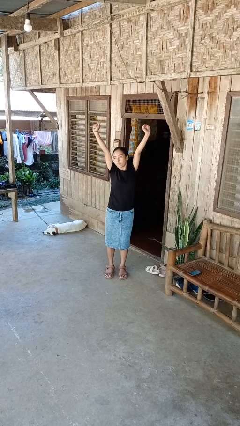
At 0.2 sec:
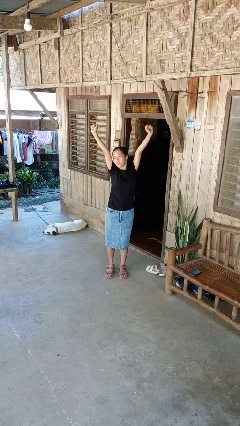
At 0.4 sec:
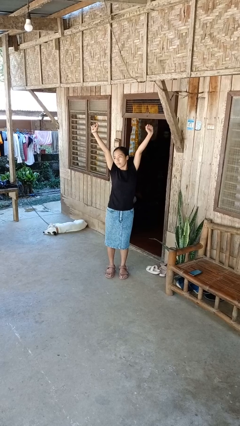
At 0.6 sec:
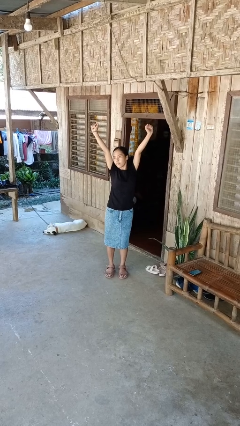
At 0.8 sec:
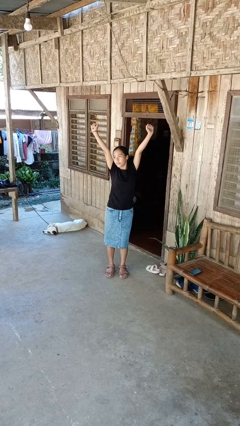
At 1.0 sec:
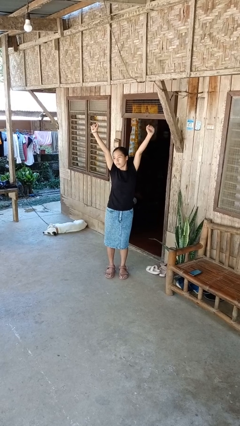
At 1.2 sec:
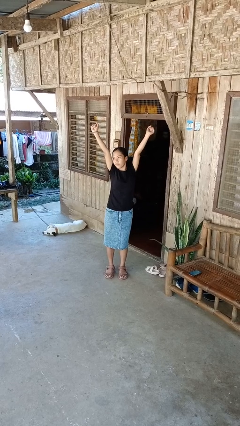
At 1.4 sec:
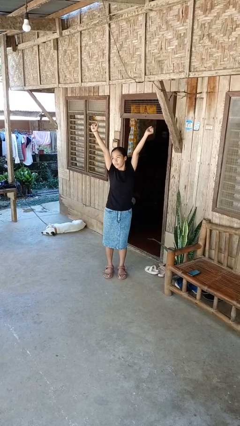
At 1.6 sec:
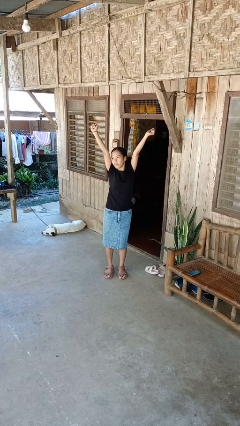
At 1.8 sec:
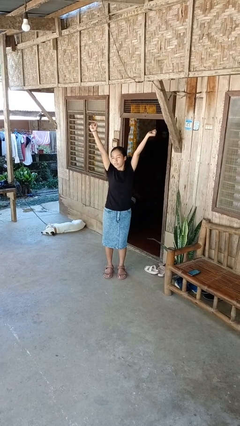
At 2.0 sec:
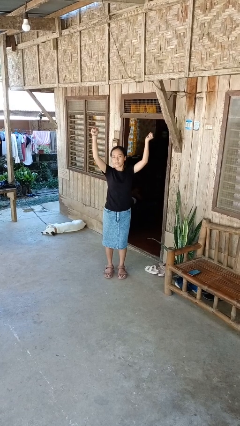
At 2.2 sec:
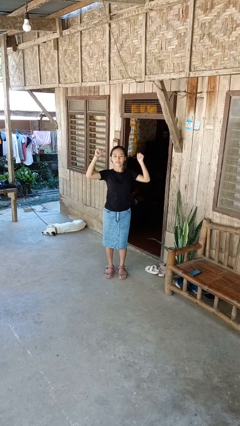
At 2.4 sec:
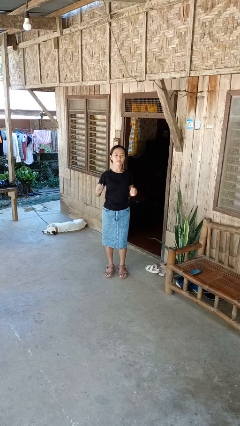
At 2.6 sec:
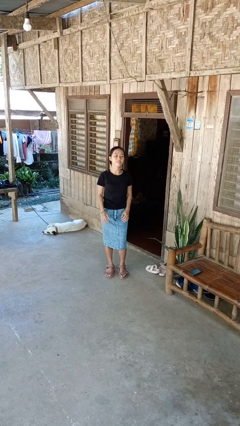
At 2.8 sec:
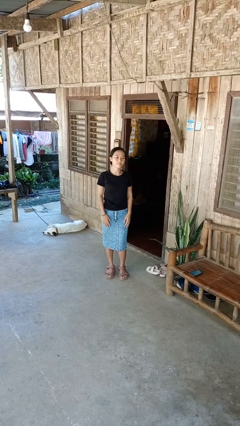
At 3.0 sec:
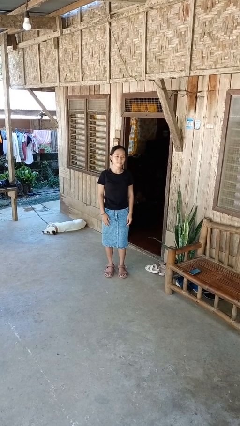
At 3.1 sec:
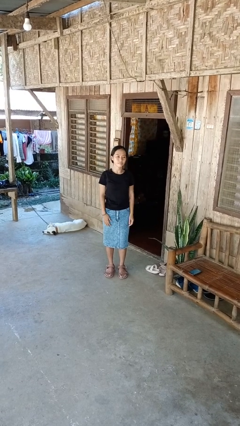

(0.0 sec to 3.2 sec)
person stretches arms over head

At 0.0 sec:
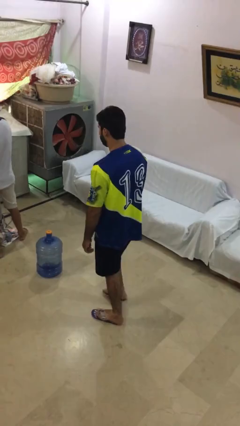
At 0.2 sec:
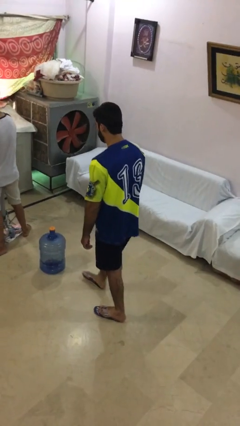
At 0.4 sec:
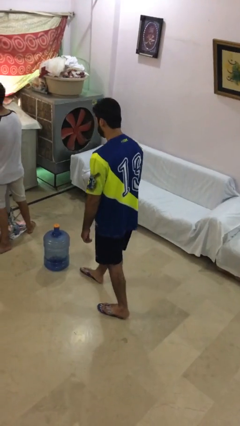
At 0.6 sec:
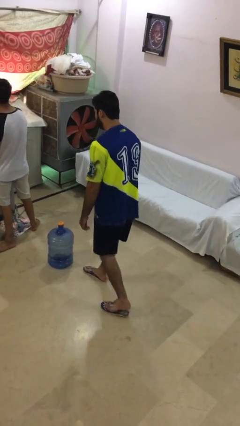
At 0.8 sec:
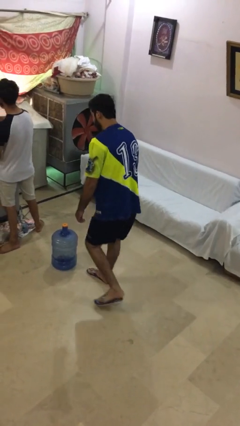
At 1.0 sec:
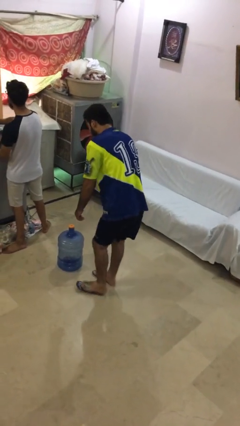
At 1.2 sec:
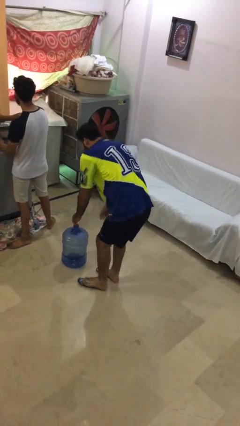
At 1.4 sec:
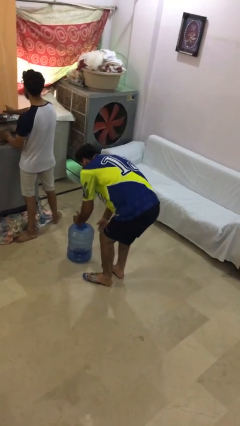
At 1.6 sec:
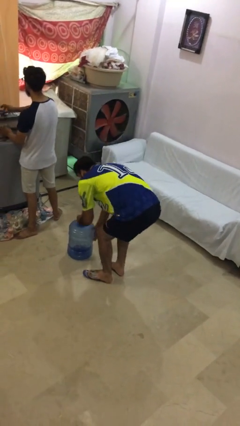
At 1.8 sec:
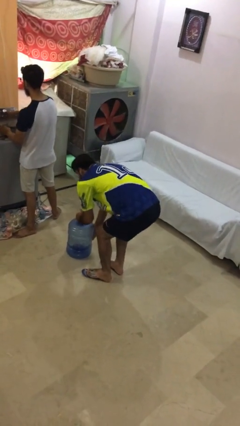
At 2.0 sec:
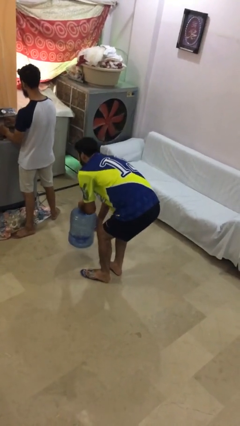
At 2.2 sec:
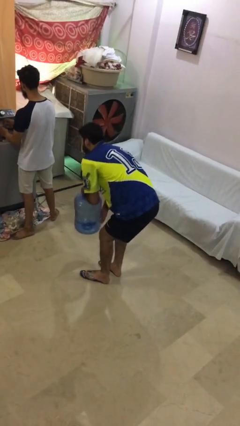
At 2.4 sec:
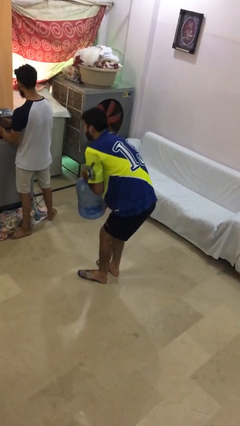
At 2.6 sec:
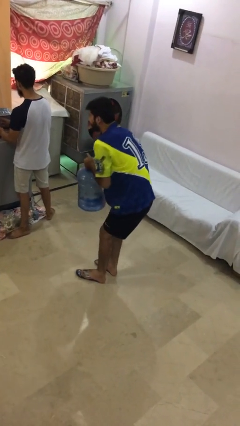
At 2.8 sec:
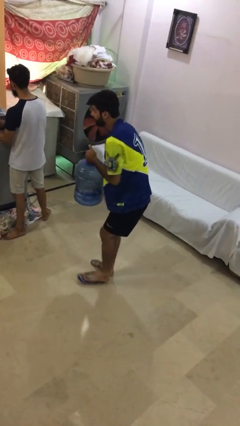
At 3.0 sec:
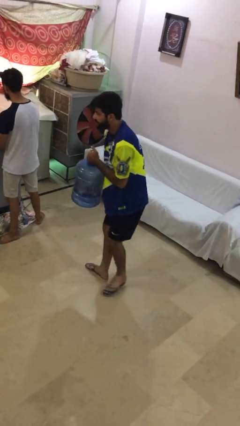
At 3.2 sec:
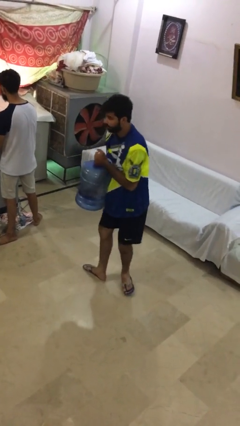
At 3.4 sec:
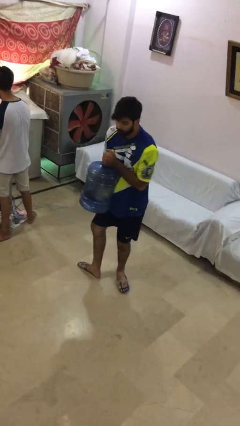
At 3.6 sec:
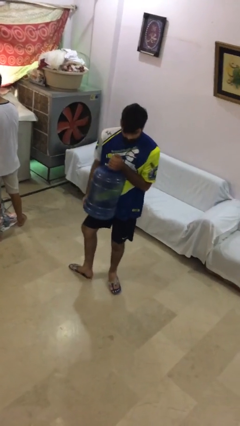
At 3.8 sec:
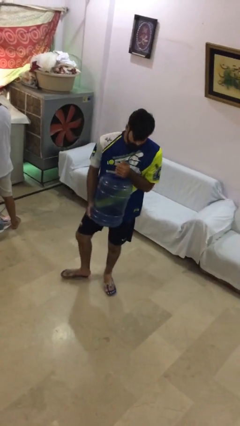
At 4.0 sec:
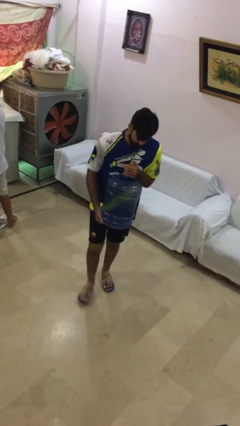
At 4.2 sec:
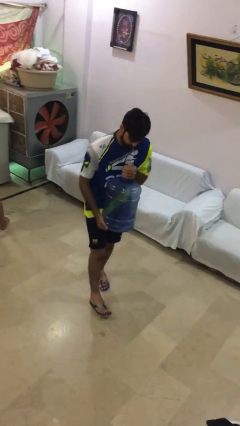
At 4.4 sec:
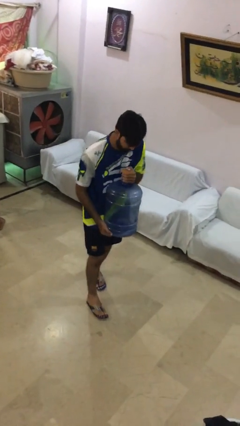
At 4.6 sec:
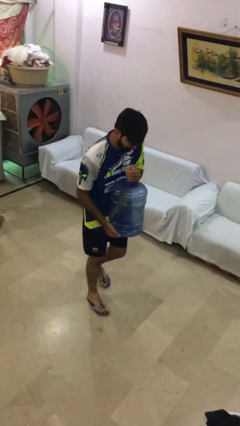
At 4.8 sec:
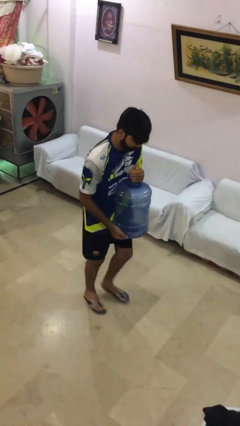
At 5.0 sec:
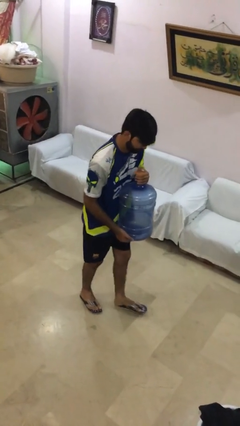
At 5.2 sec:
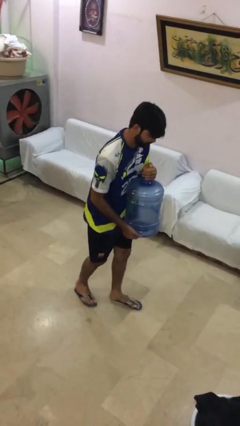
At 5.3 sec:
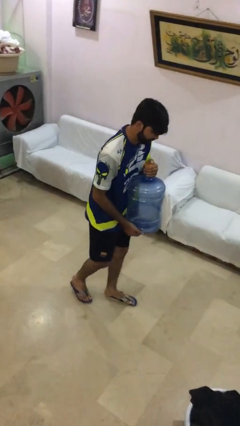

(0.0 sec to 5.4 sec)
person steals object from person

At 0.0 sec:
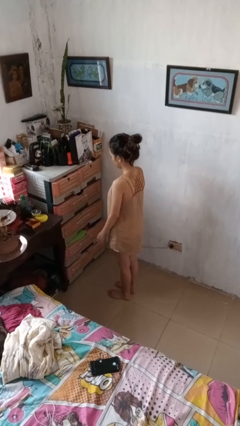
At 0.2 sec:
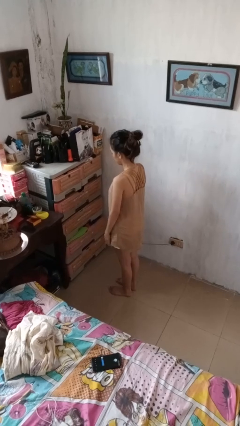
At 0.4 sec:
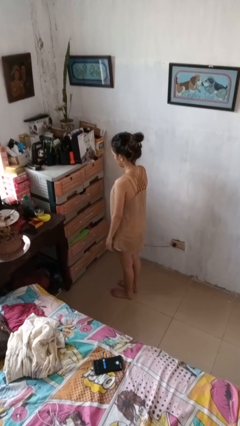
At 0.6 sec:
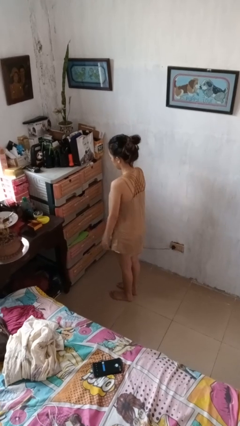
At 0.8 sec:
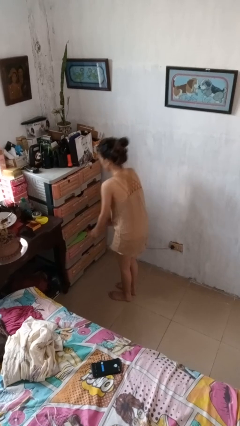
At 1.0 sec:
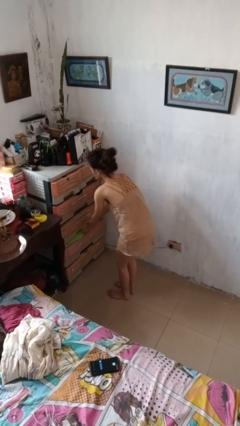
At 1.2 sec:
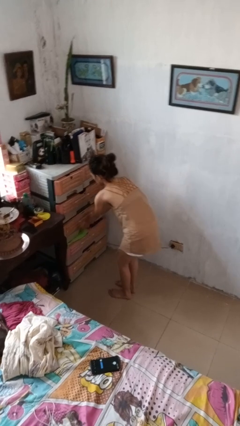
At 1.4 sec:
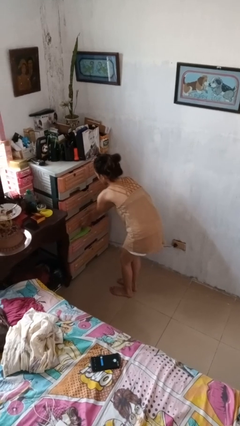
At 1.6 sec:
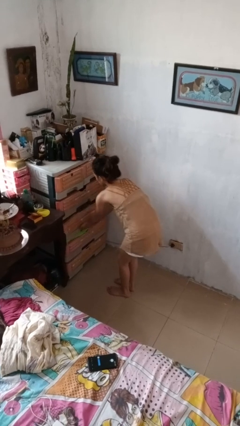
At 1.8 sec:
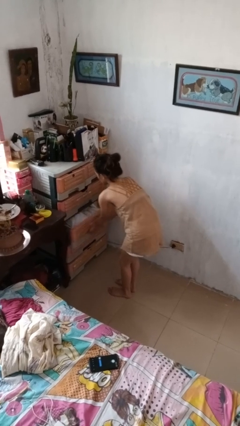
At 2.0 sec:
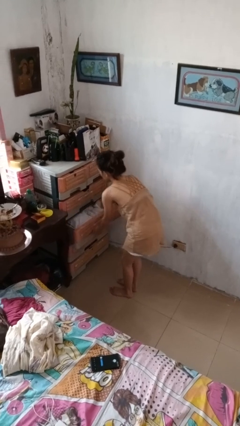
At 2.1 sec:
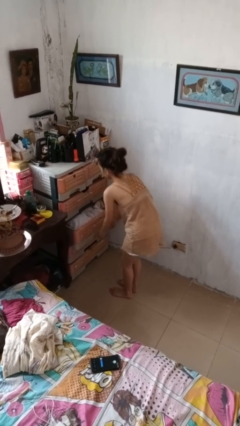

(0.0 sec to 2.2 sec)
person opens dresser drawer

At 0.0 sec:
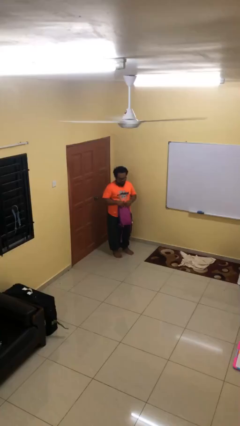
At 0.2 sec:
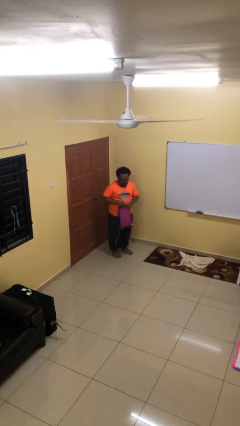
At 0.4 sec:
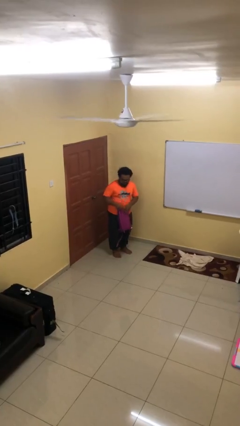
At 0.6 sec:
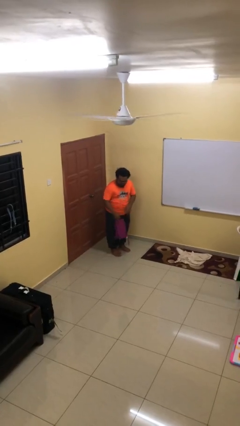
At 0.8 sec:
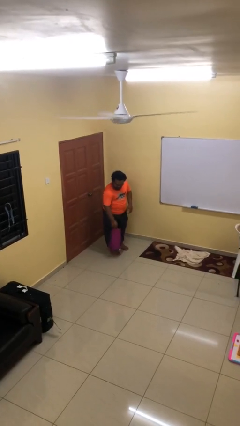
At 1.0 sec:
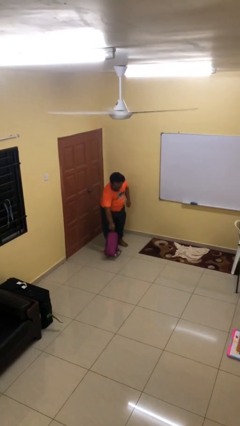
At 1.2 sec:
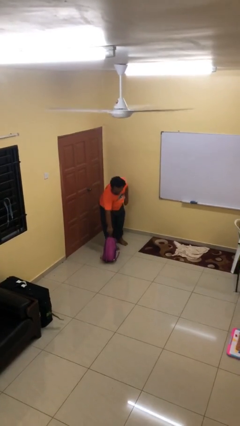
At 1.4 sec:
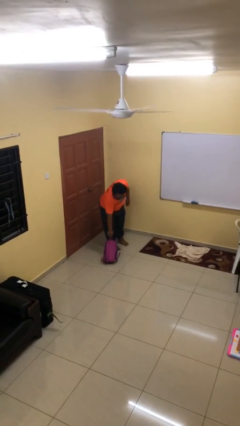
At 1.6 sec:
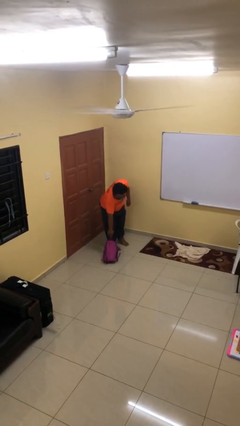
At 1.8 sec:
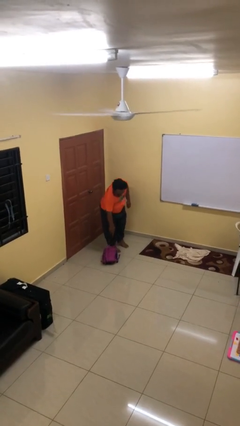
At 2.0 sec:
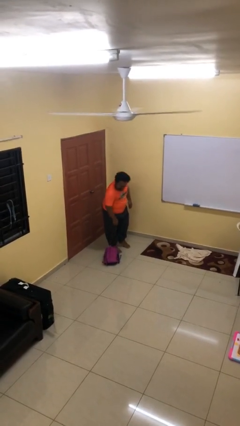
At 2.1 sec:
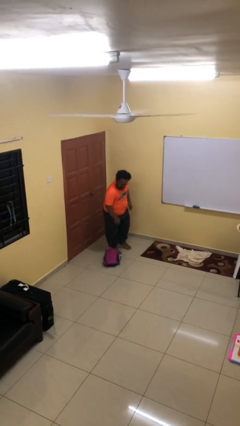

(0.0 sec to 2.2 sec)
person puts down object on floor

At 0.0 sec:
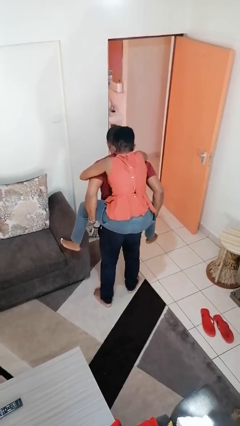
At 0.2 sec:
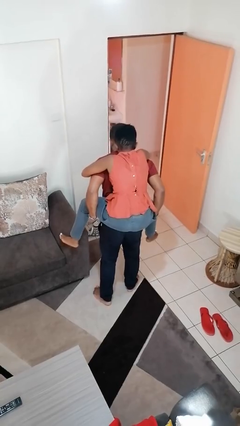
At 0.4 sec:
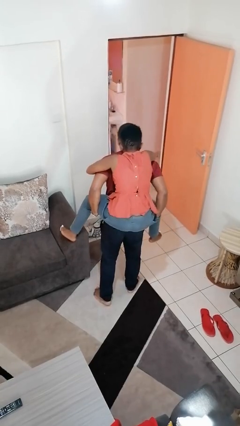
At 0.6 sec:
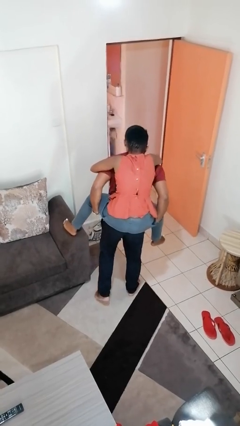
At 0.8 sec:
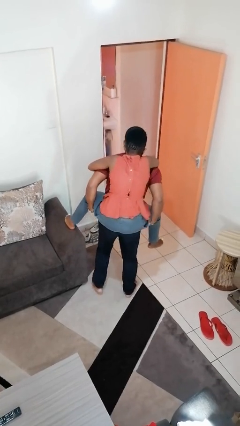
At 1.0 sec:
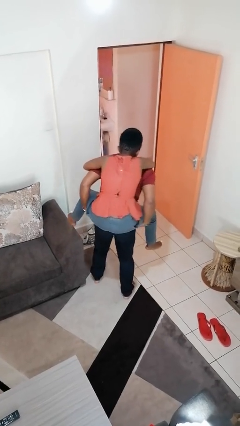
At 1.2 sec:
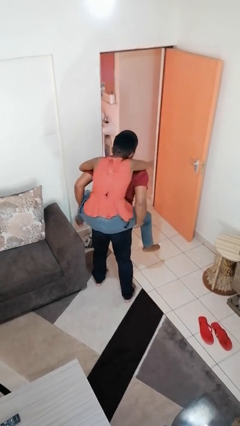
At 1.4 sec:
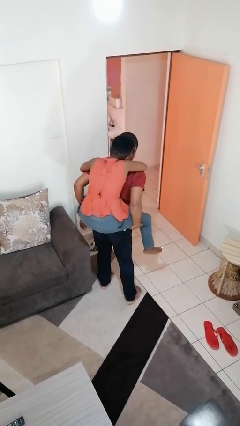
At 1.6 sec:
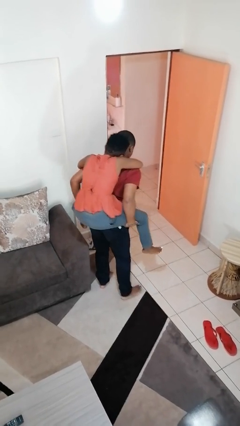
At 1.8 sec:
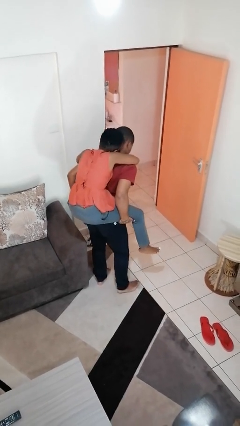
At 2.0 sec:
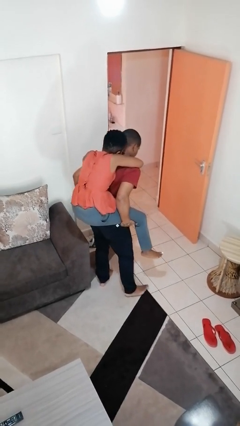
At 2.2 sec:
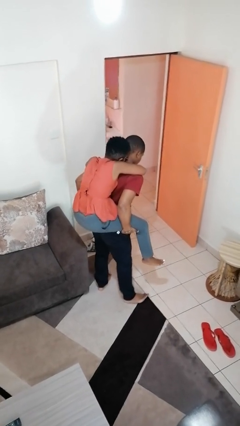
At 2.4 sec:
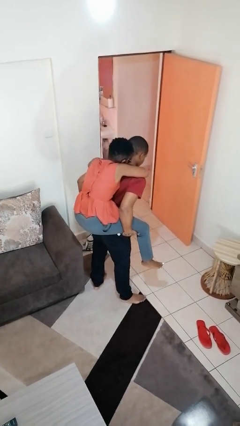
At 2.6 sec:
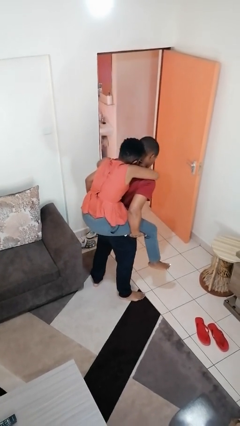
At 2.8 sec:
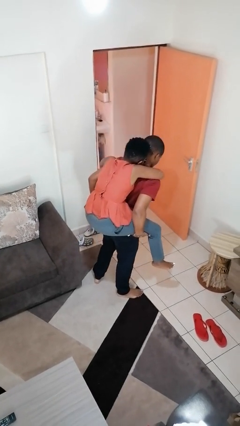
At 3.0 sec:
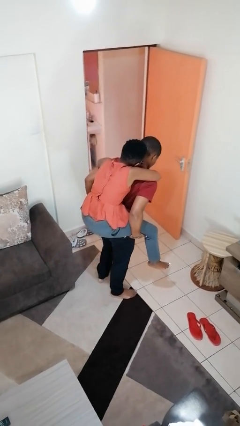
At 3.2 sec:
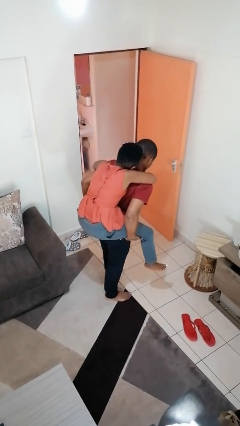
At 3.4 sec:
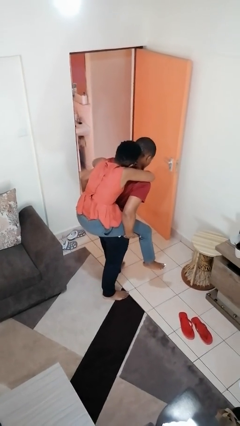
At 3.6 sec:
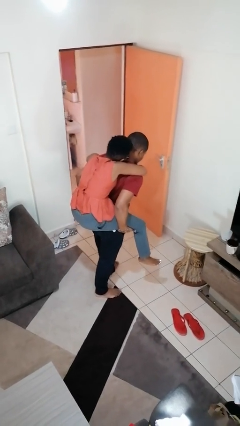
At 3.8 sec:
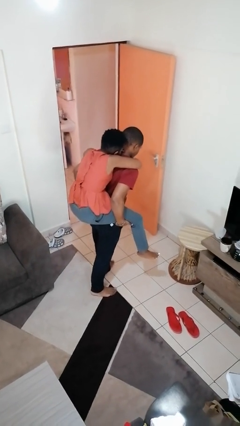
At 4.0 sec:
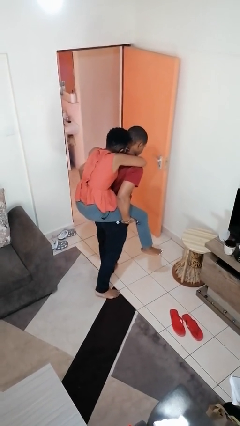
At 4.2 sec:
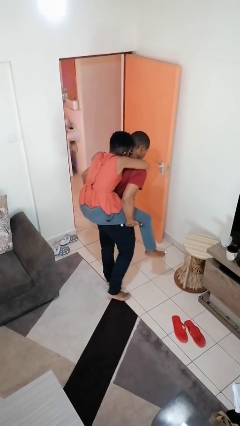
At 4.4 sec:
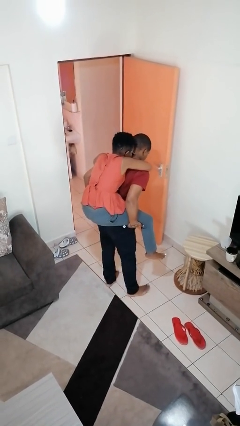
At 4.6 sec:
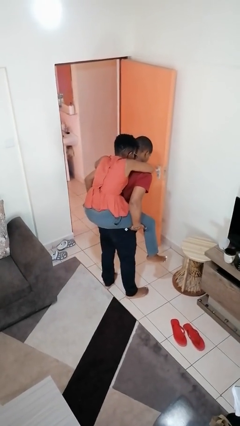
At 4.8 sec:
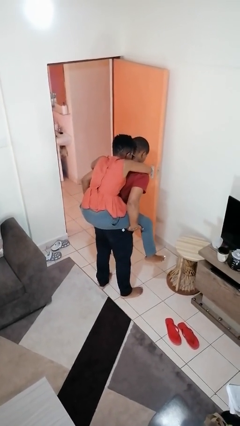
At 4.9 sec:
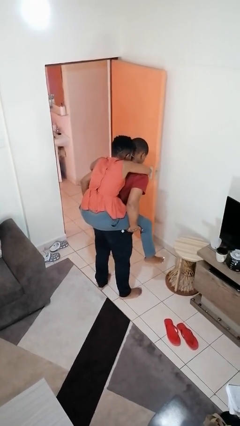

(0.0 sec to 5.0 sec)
person carries person on back
